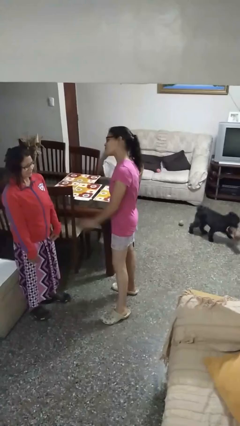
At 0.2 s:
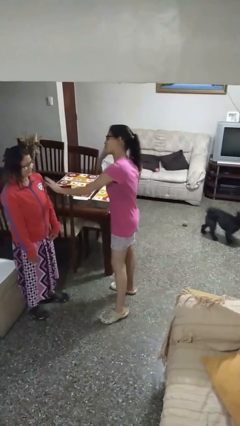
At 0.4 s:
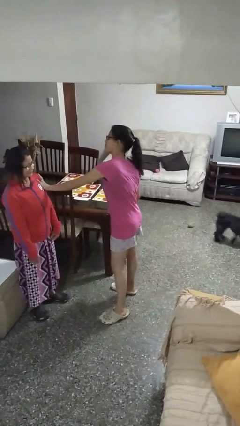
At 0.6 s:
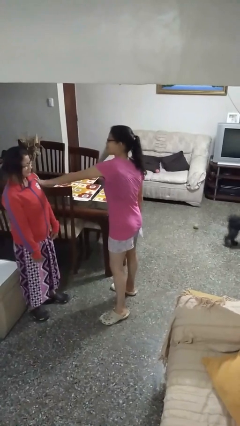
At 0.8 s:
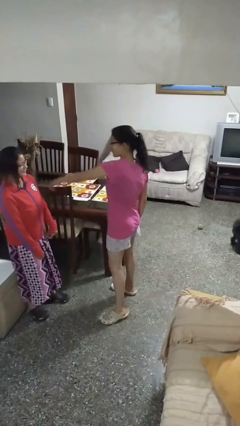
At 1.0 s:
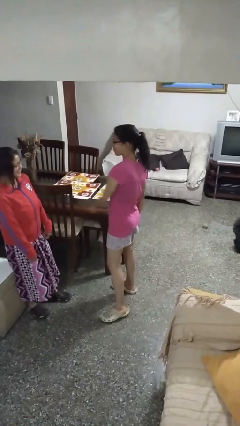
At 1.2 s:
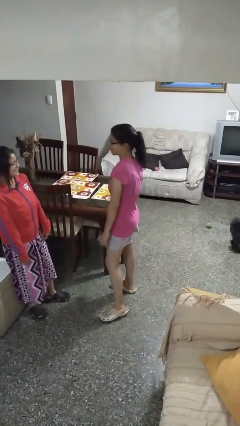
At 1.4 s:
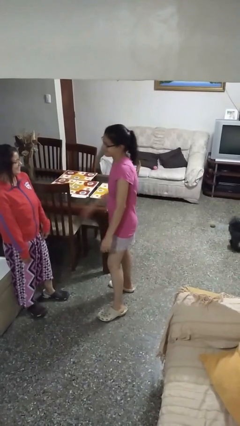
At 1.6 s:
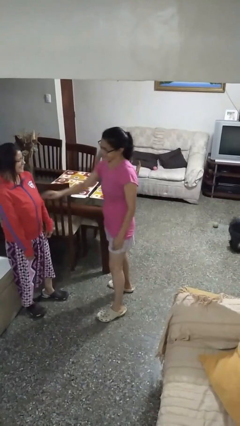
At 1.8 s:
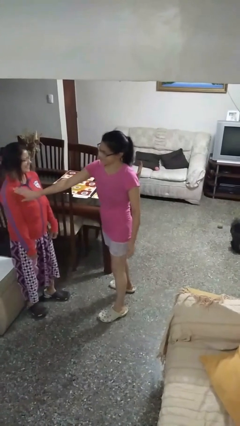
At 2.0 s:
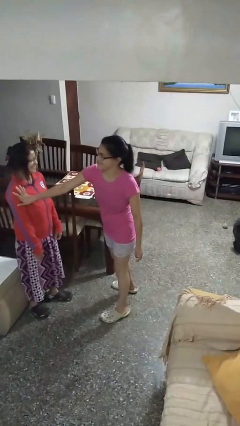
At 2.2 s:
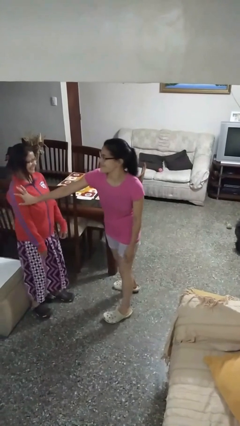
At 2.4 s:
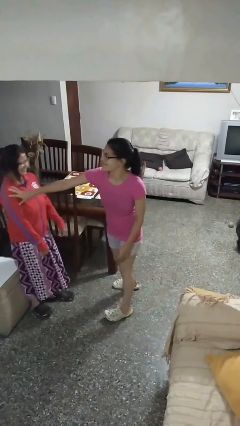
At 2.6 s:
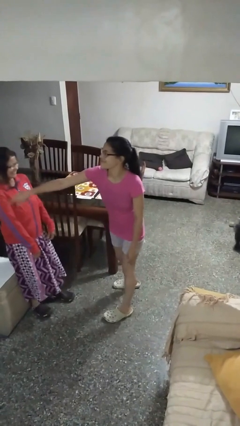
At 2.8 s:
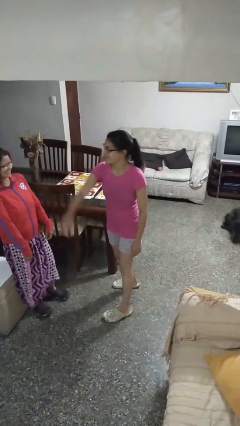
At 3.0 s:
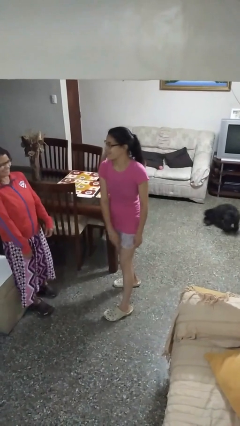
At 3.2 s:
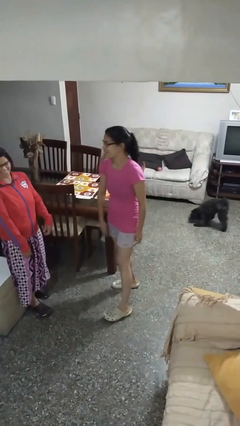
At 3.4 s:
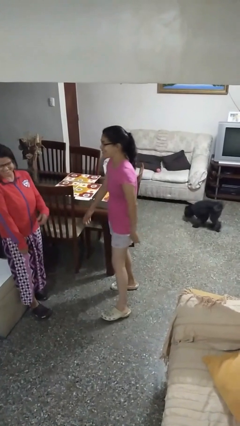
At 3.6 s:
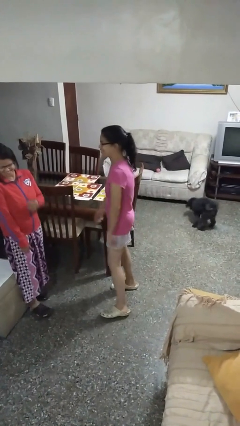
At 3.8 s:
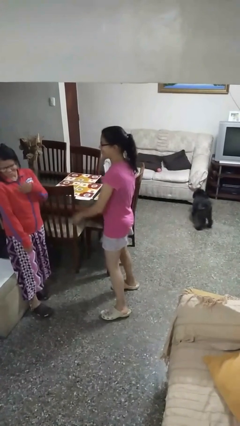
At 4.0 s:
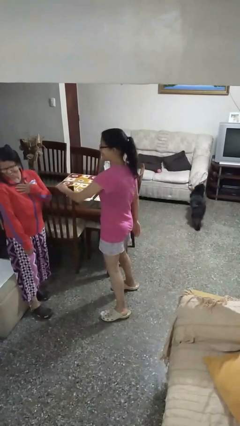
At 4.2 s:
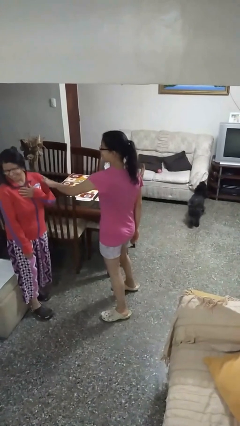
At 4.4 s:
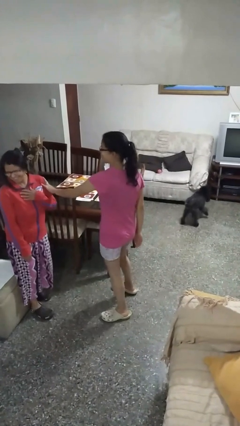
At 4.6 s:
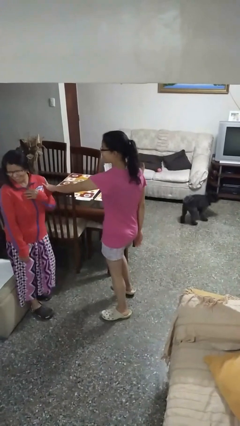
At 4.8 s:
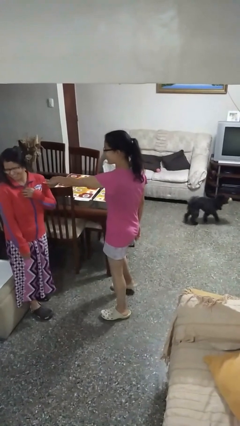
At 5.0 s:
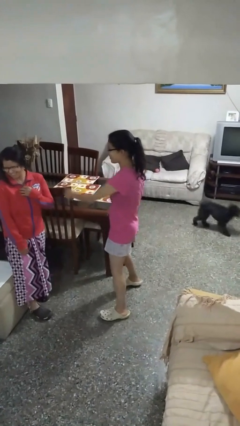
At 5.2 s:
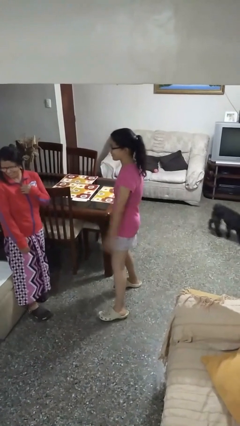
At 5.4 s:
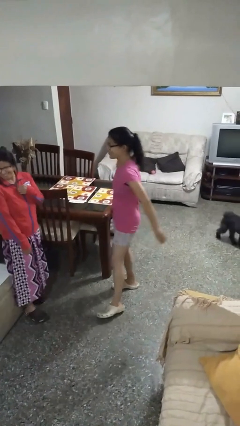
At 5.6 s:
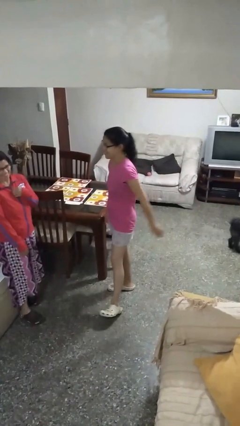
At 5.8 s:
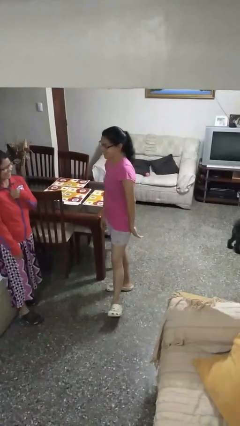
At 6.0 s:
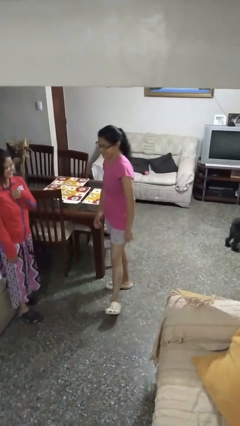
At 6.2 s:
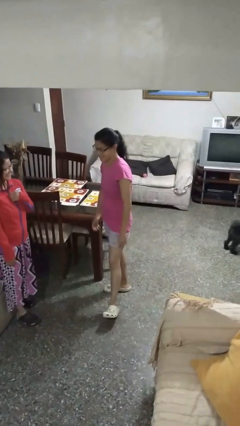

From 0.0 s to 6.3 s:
person shoves person

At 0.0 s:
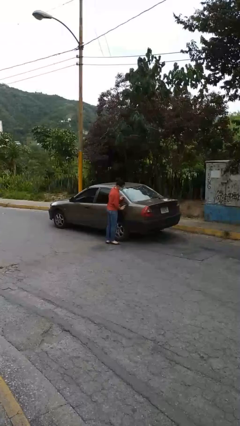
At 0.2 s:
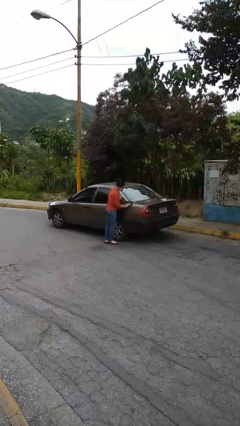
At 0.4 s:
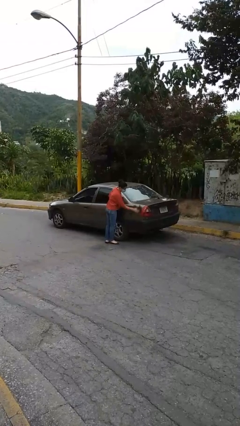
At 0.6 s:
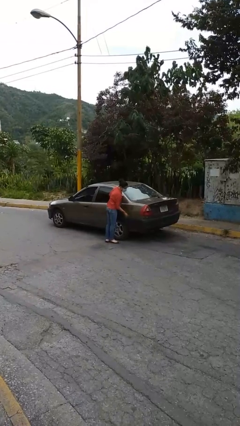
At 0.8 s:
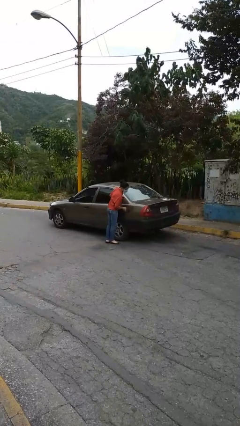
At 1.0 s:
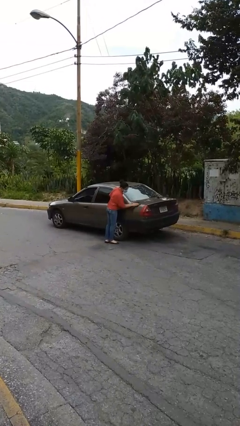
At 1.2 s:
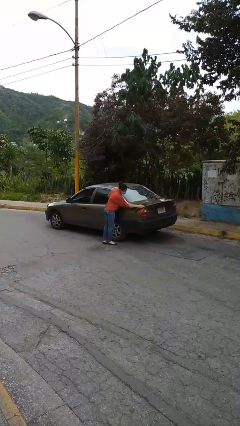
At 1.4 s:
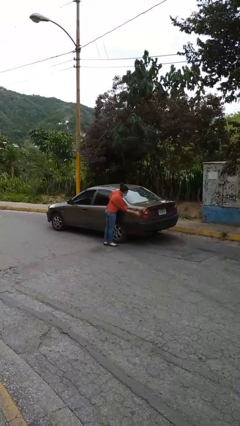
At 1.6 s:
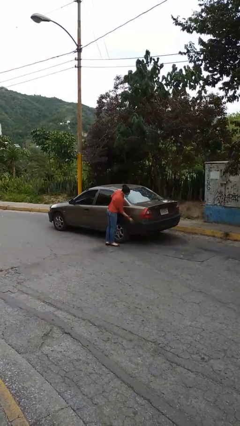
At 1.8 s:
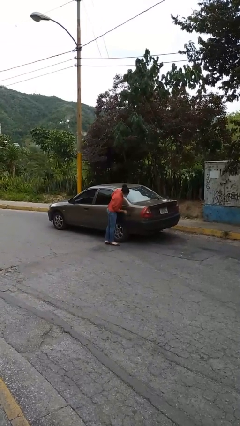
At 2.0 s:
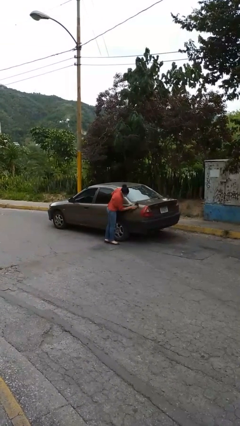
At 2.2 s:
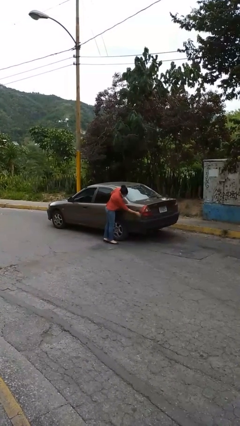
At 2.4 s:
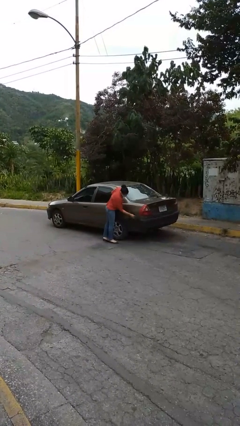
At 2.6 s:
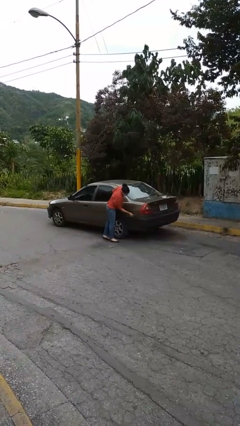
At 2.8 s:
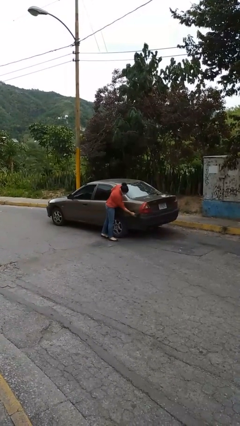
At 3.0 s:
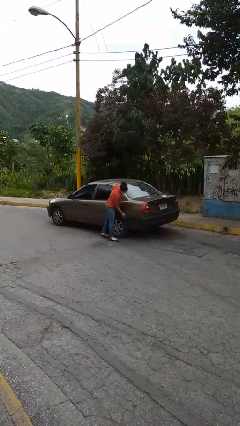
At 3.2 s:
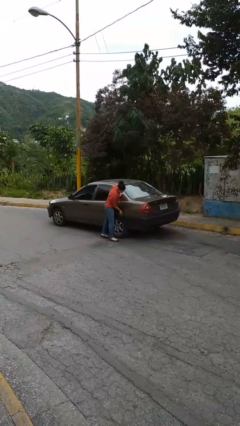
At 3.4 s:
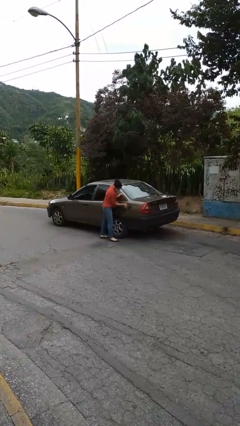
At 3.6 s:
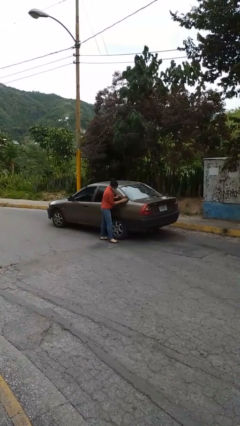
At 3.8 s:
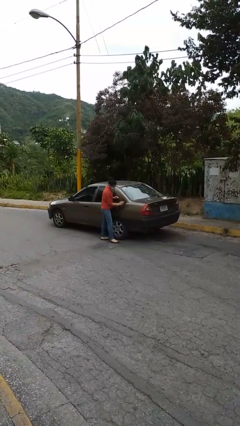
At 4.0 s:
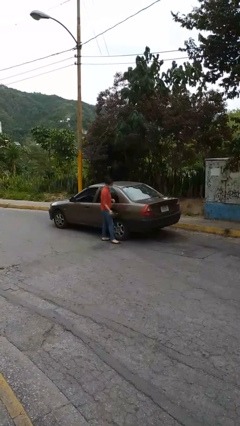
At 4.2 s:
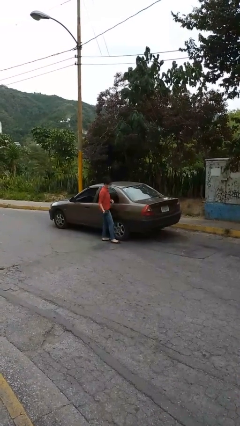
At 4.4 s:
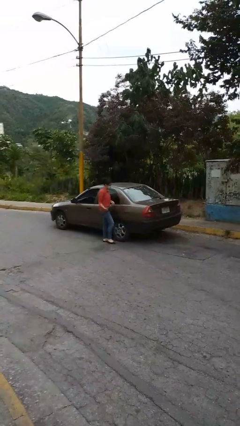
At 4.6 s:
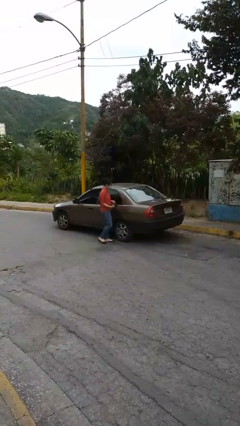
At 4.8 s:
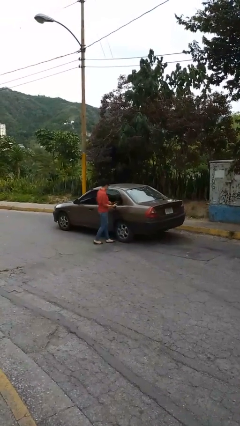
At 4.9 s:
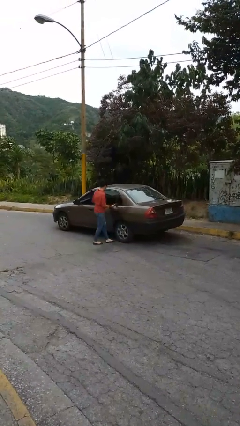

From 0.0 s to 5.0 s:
person polishes car with rag

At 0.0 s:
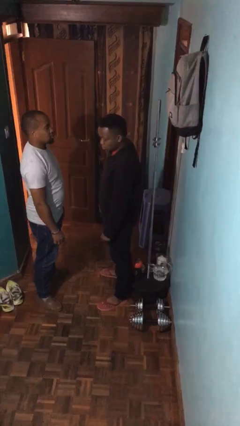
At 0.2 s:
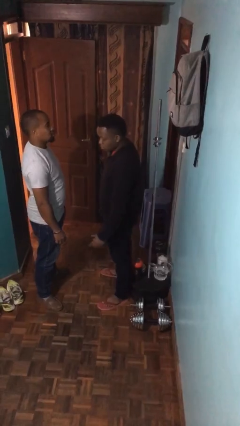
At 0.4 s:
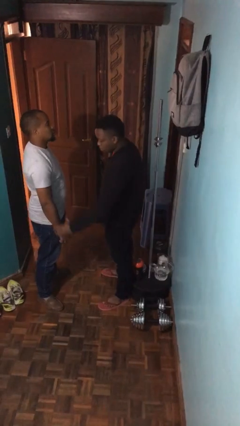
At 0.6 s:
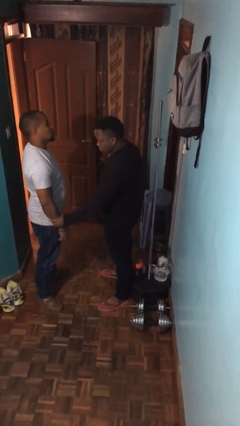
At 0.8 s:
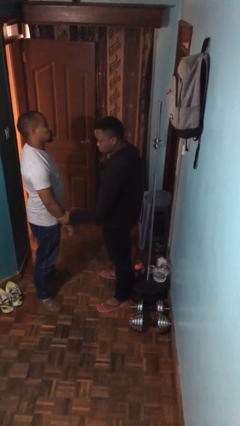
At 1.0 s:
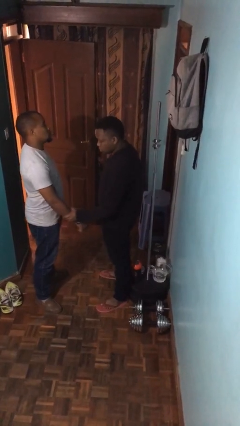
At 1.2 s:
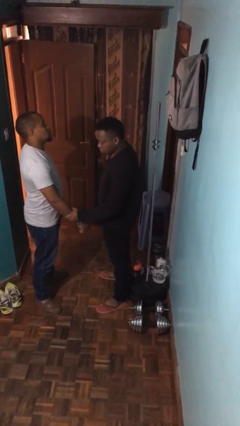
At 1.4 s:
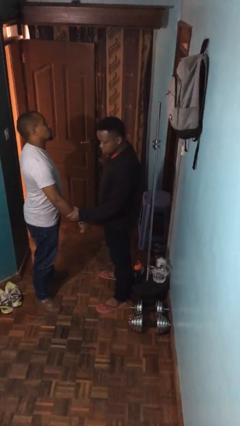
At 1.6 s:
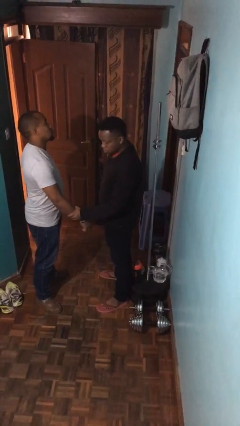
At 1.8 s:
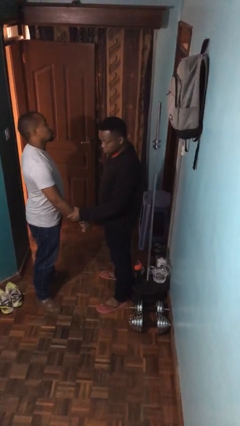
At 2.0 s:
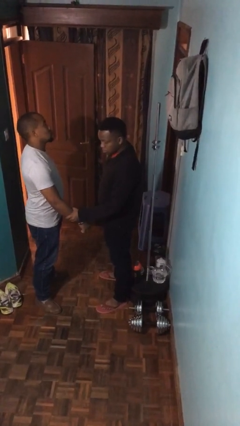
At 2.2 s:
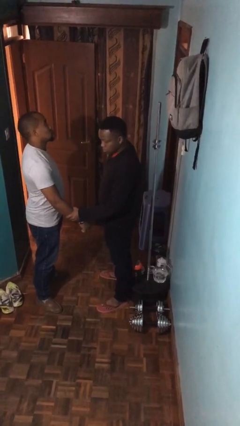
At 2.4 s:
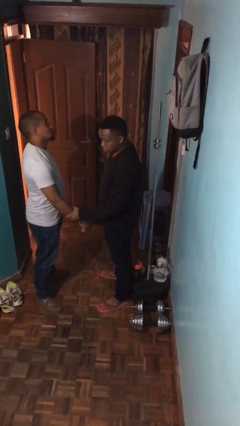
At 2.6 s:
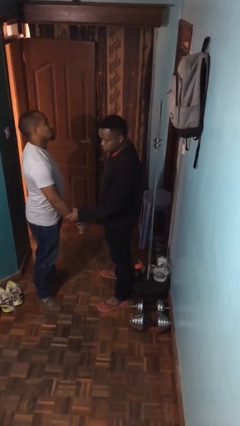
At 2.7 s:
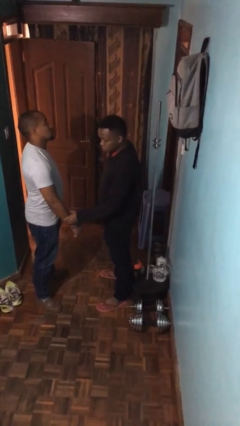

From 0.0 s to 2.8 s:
person grabs person by forearm

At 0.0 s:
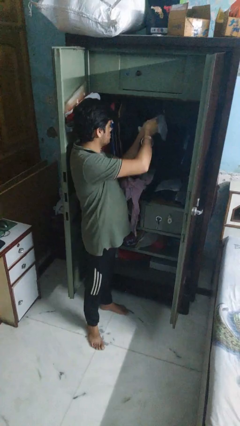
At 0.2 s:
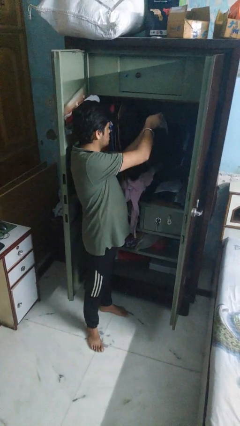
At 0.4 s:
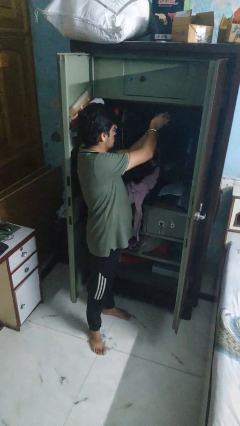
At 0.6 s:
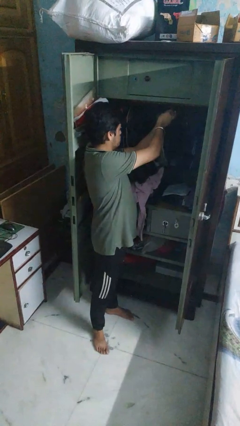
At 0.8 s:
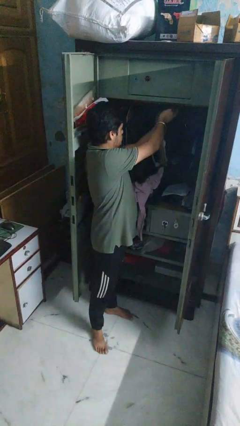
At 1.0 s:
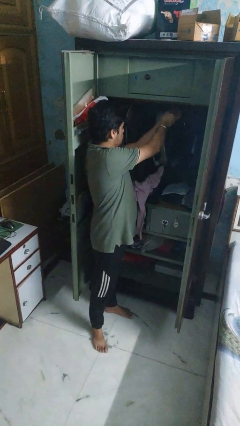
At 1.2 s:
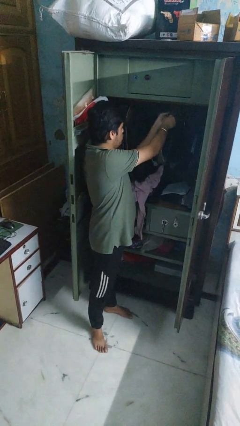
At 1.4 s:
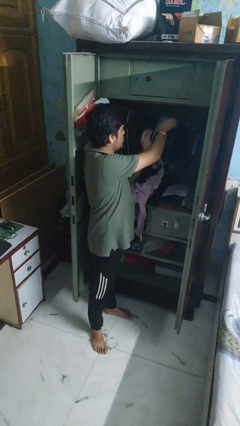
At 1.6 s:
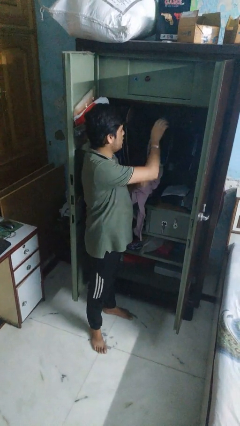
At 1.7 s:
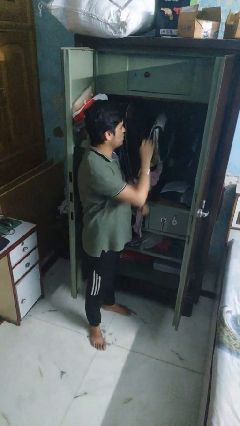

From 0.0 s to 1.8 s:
person puts clothes into closet

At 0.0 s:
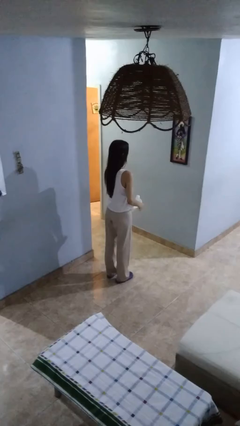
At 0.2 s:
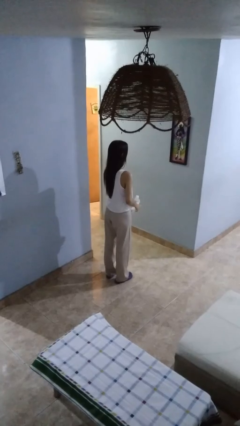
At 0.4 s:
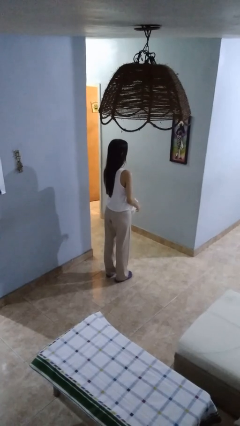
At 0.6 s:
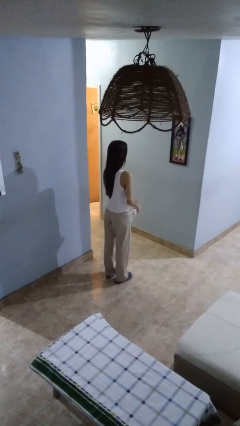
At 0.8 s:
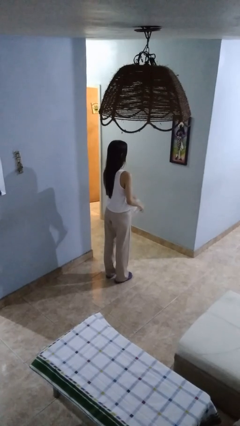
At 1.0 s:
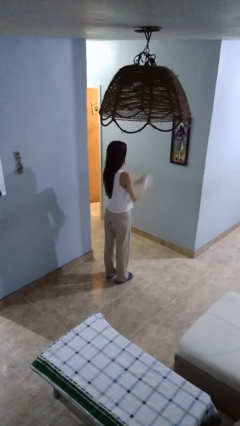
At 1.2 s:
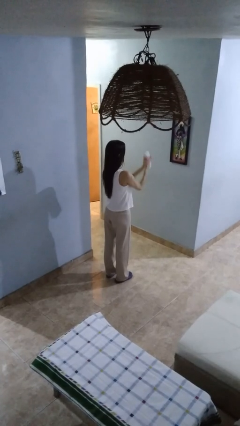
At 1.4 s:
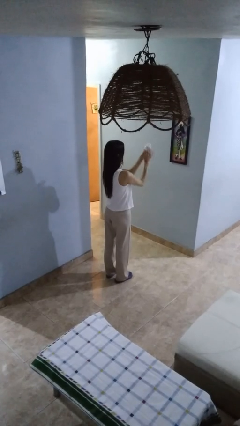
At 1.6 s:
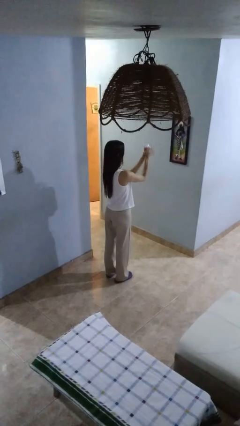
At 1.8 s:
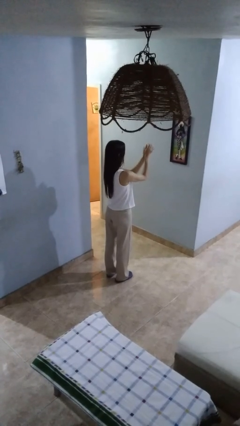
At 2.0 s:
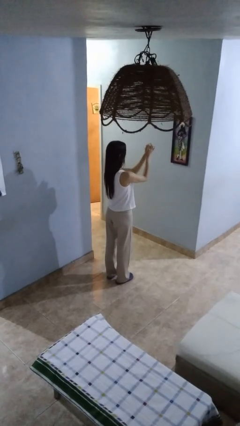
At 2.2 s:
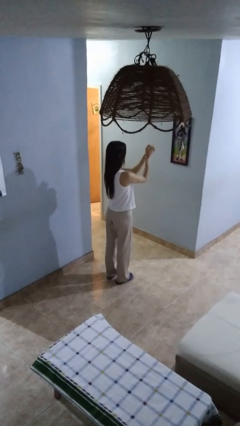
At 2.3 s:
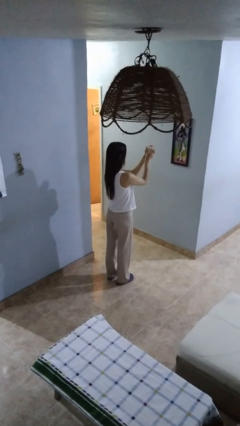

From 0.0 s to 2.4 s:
person crumples paper
